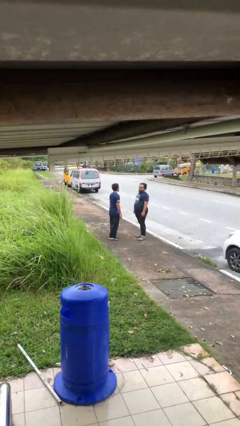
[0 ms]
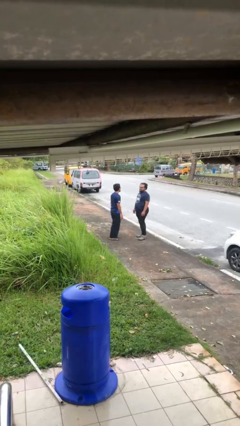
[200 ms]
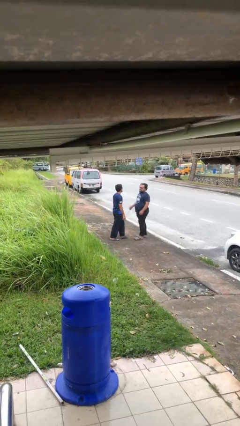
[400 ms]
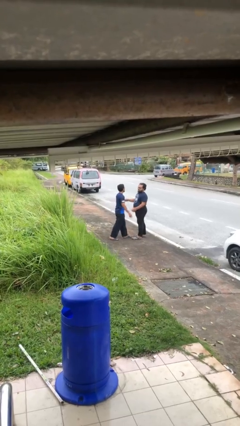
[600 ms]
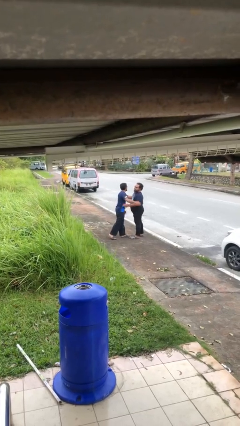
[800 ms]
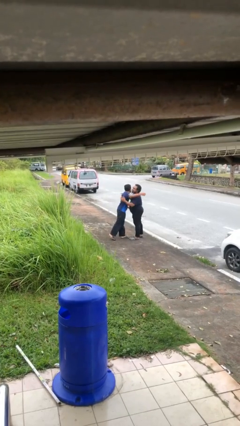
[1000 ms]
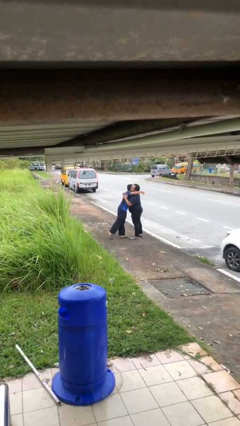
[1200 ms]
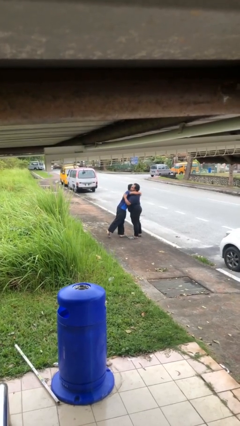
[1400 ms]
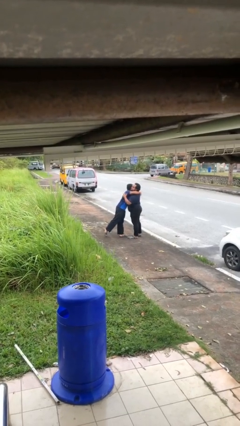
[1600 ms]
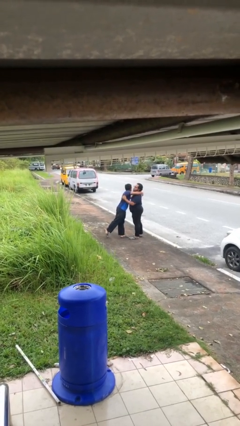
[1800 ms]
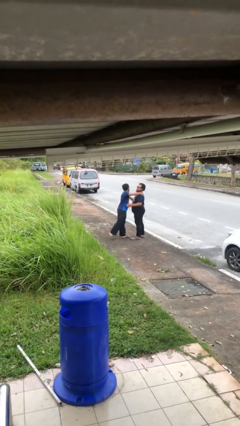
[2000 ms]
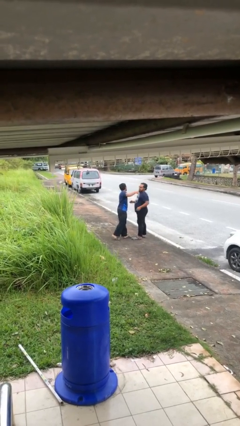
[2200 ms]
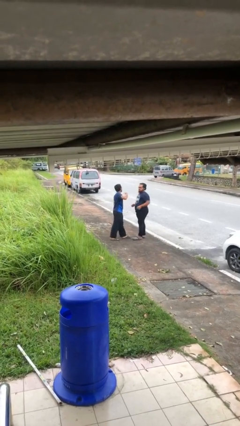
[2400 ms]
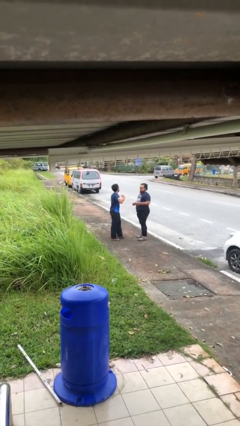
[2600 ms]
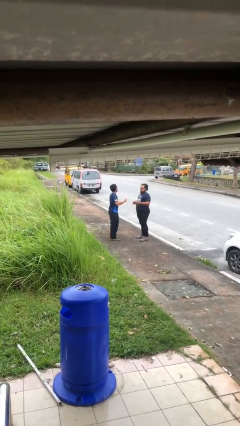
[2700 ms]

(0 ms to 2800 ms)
person embraces person

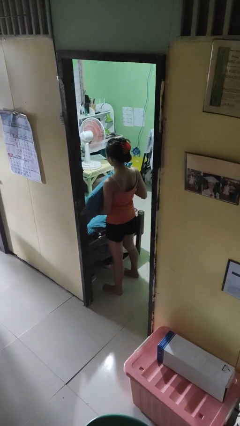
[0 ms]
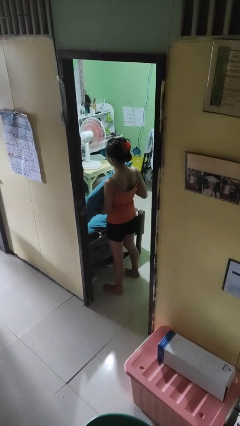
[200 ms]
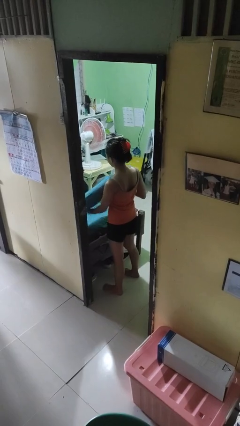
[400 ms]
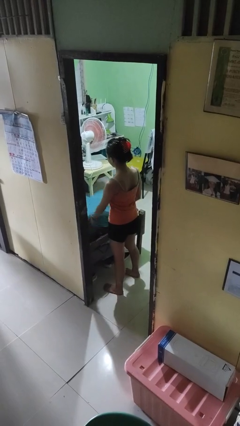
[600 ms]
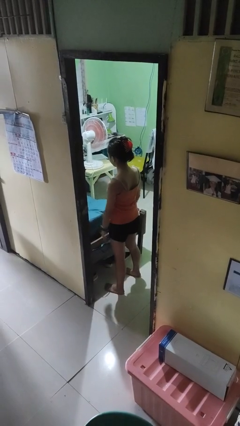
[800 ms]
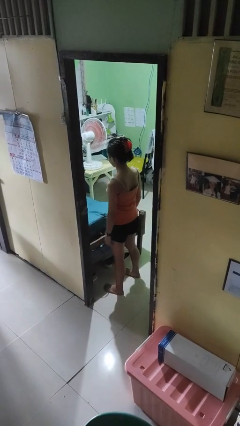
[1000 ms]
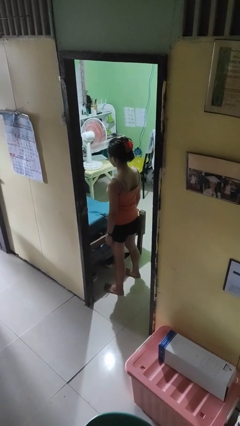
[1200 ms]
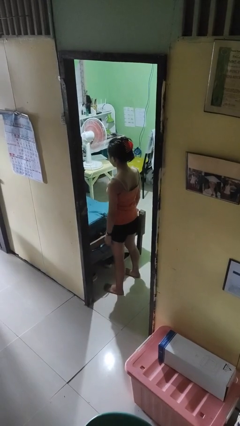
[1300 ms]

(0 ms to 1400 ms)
person puts down object on bed

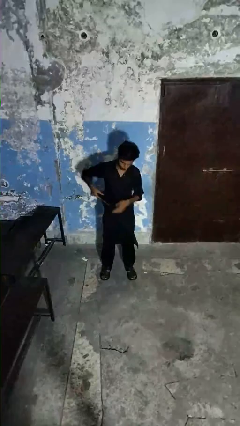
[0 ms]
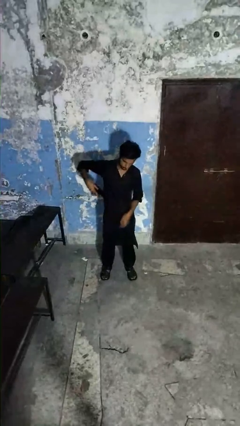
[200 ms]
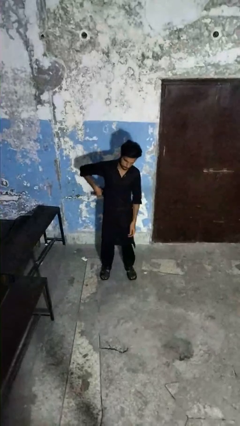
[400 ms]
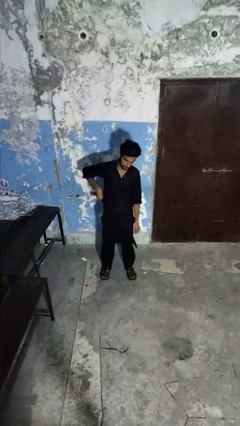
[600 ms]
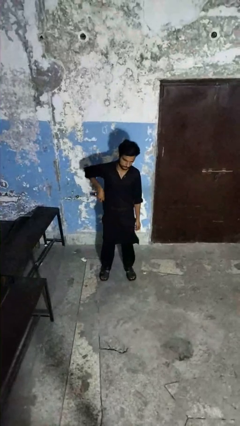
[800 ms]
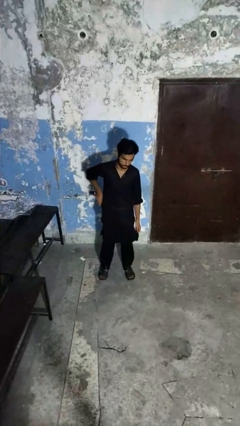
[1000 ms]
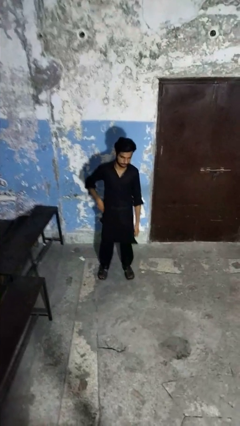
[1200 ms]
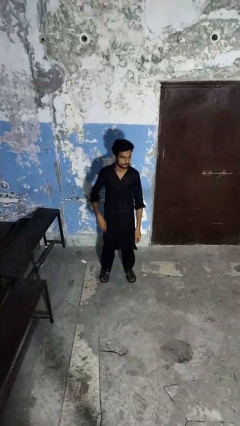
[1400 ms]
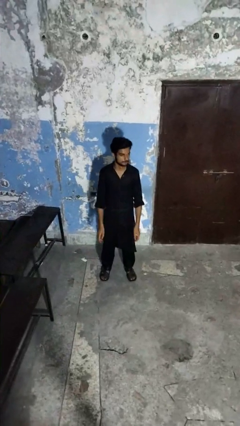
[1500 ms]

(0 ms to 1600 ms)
person puts phone into pocket

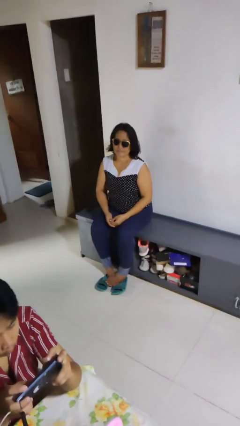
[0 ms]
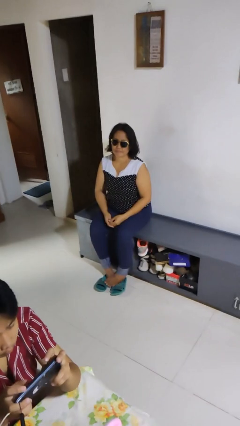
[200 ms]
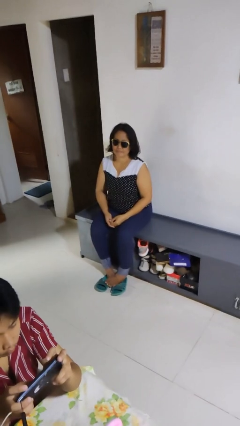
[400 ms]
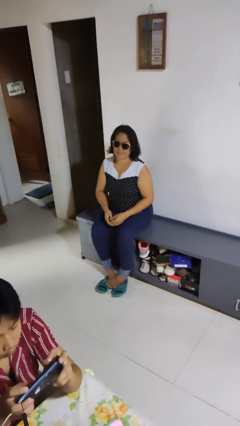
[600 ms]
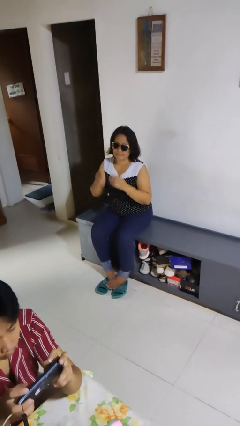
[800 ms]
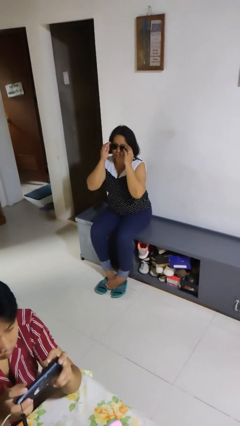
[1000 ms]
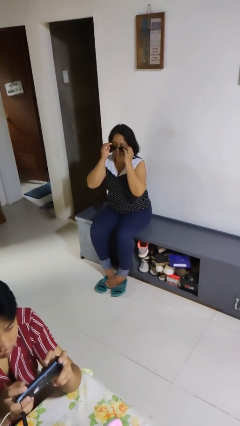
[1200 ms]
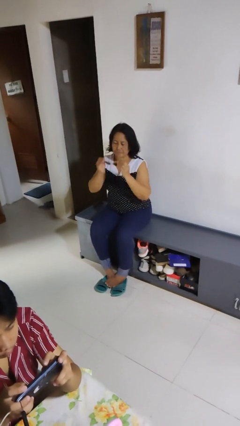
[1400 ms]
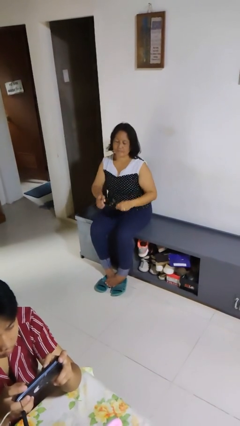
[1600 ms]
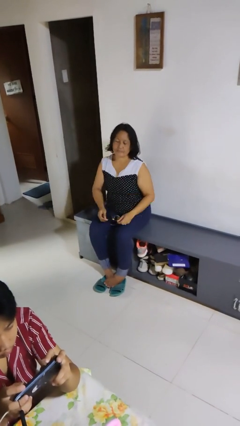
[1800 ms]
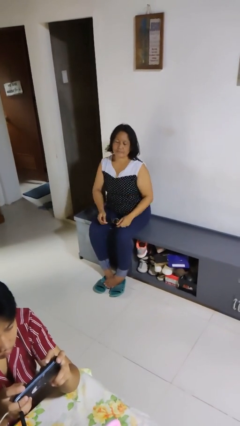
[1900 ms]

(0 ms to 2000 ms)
person takes off sunglasses

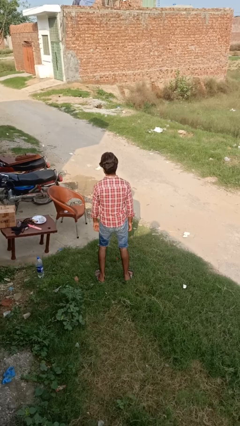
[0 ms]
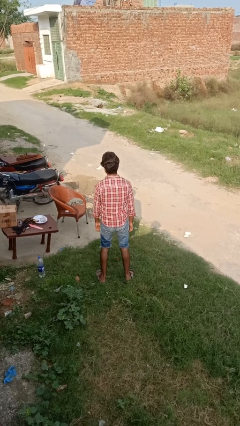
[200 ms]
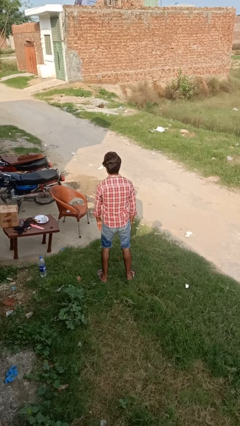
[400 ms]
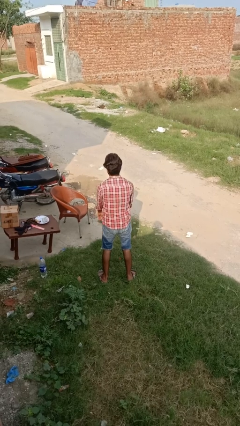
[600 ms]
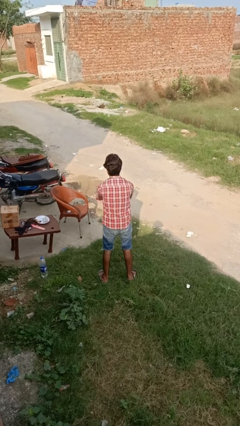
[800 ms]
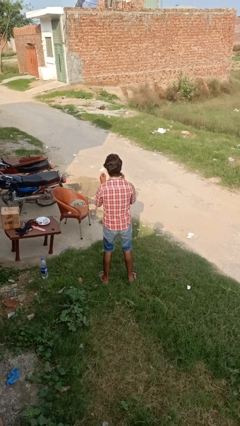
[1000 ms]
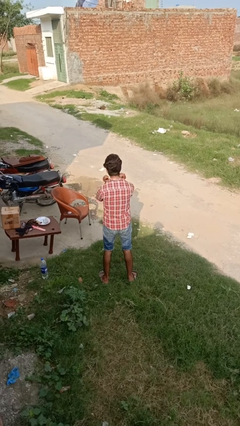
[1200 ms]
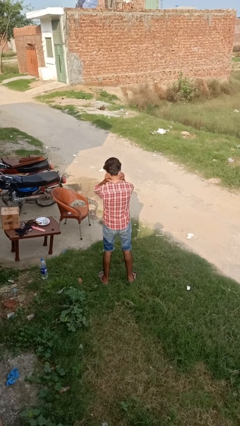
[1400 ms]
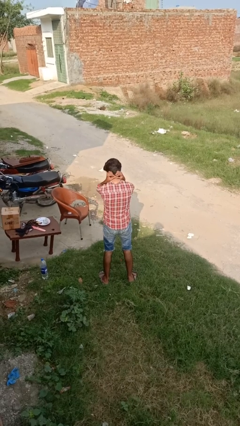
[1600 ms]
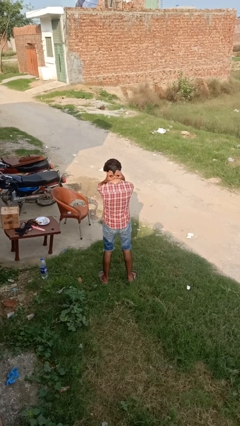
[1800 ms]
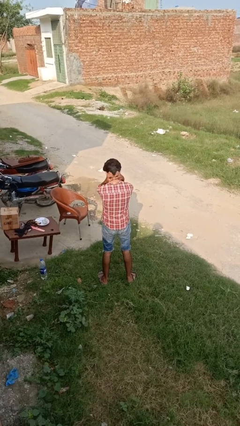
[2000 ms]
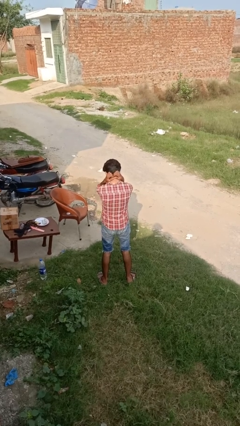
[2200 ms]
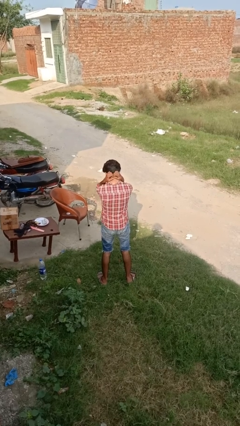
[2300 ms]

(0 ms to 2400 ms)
person puts on necklace

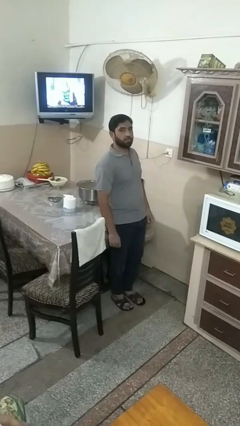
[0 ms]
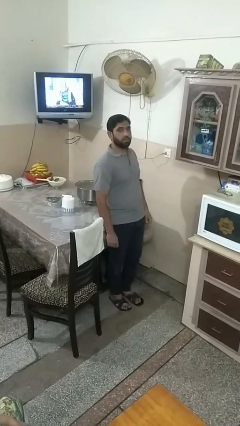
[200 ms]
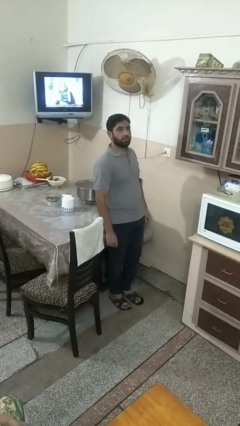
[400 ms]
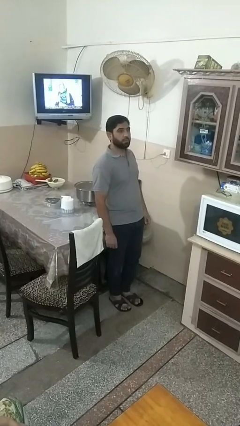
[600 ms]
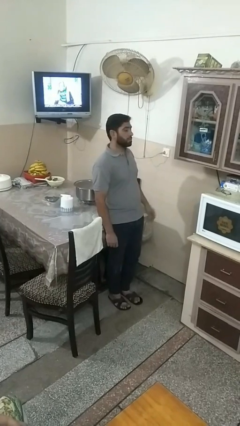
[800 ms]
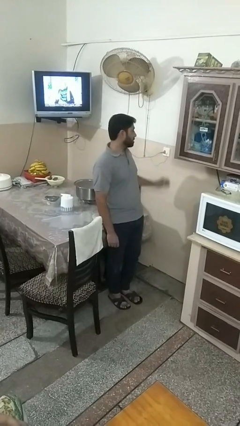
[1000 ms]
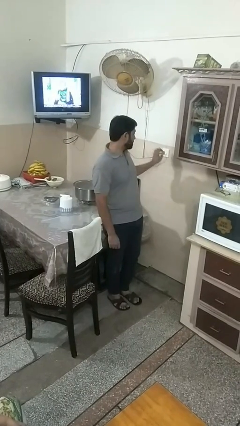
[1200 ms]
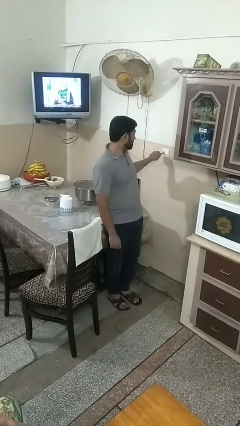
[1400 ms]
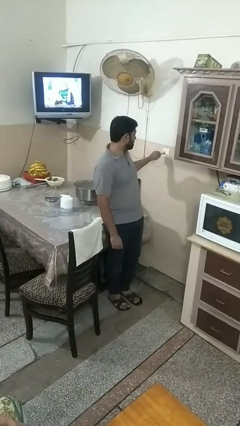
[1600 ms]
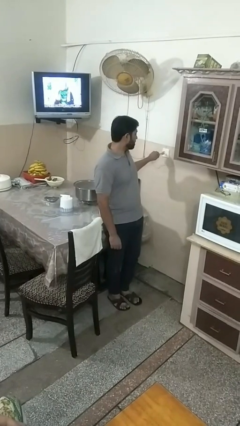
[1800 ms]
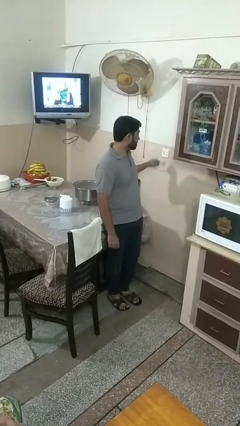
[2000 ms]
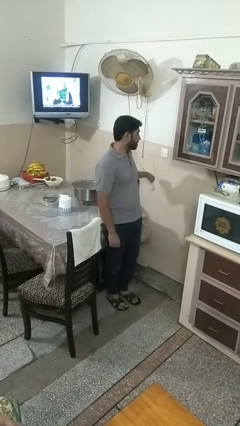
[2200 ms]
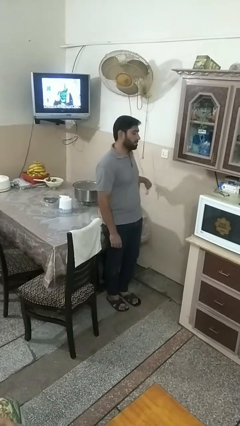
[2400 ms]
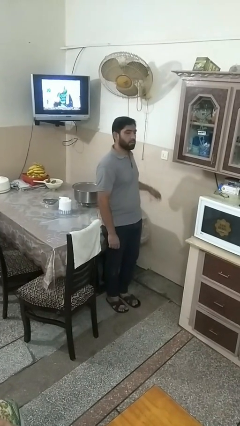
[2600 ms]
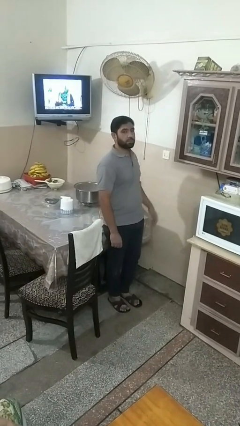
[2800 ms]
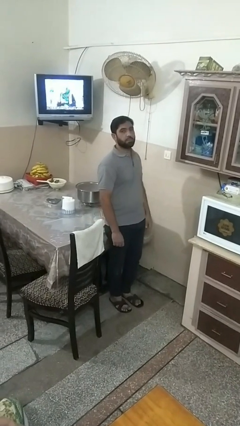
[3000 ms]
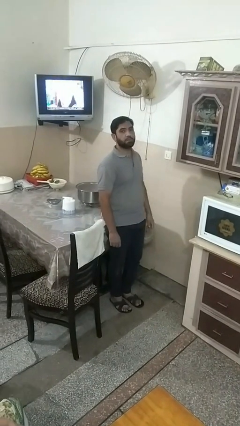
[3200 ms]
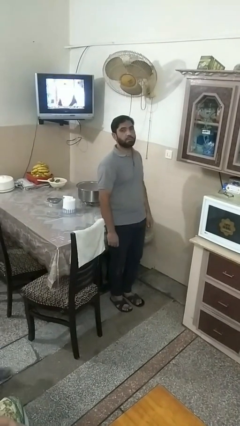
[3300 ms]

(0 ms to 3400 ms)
person unplugs from electrical socket

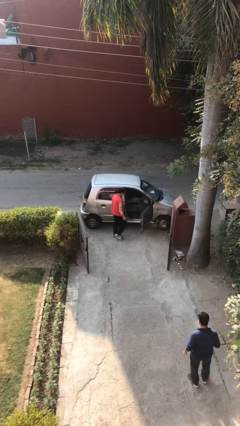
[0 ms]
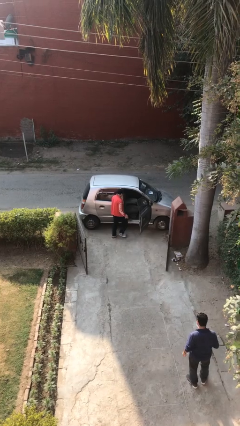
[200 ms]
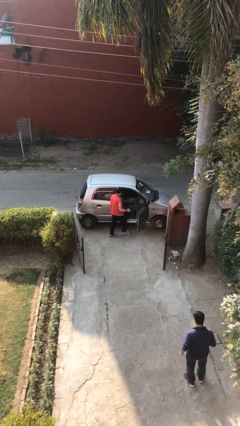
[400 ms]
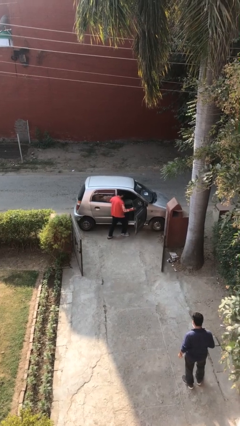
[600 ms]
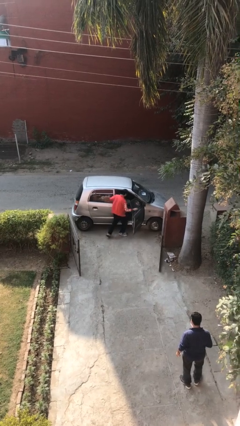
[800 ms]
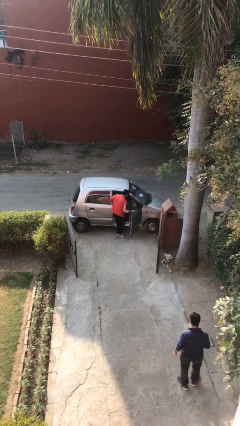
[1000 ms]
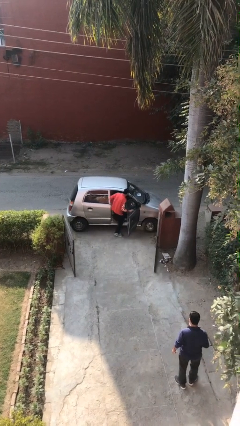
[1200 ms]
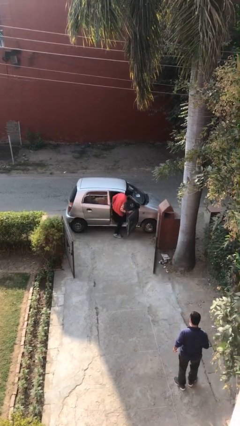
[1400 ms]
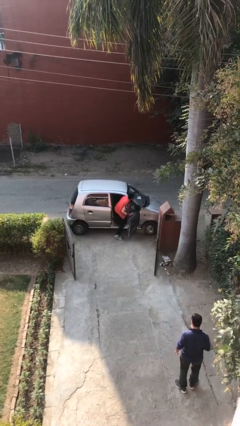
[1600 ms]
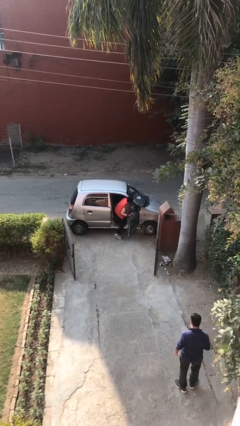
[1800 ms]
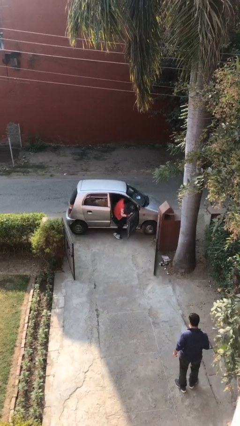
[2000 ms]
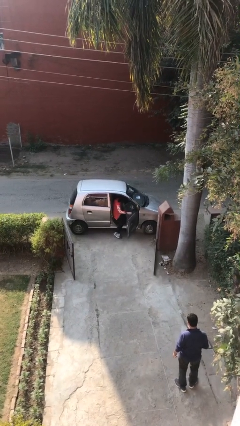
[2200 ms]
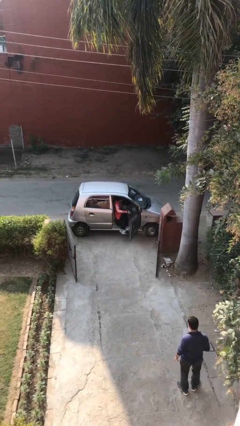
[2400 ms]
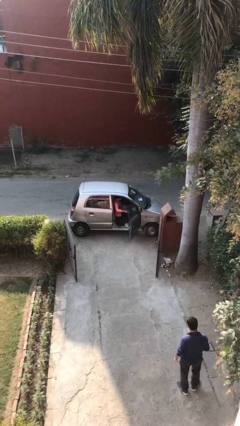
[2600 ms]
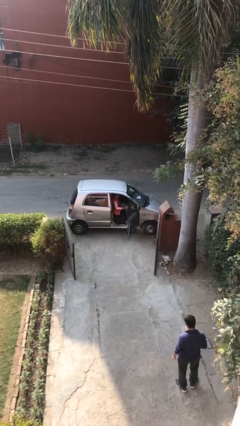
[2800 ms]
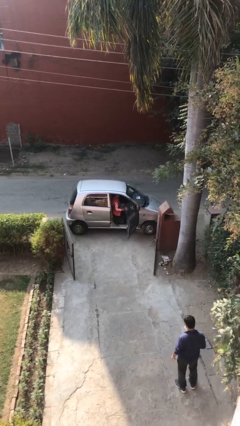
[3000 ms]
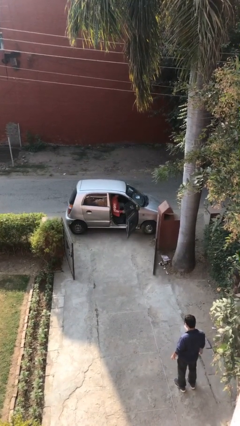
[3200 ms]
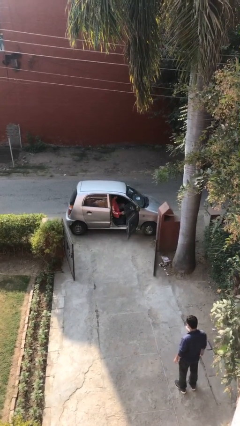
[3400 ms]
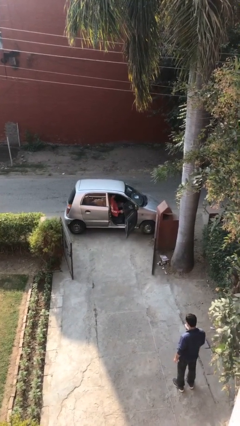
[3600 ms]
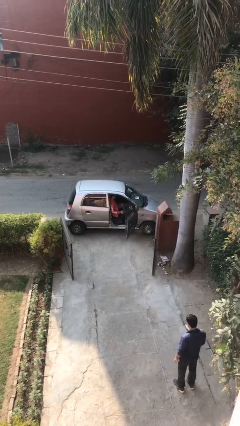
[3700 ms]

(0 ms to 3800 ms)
person enters car
